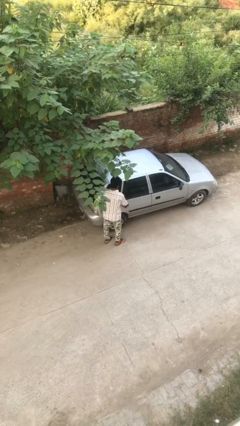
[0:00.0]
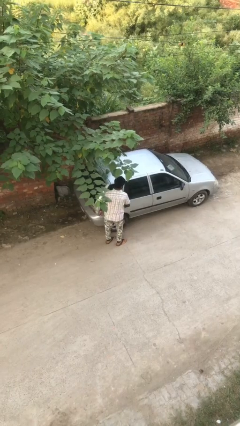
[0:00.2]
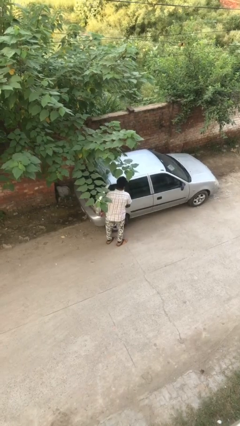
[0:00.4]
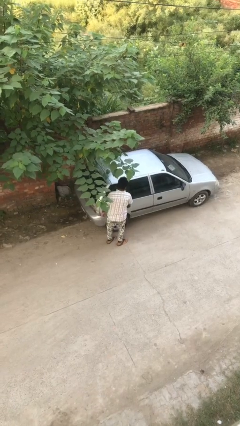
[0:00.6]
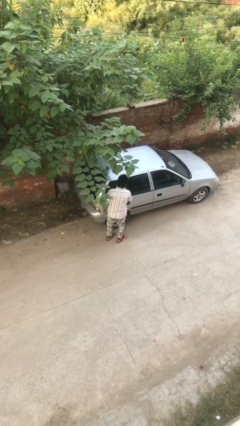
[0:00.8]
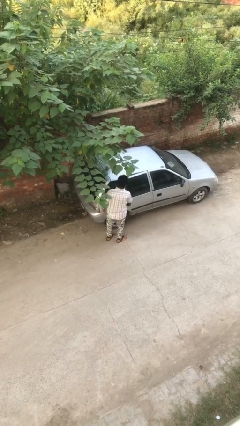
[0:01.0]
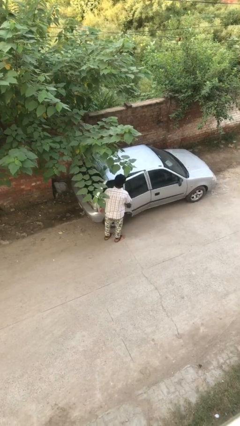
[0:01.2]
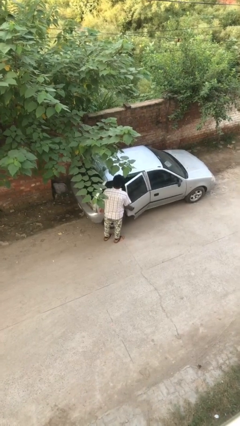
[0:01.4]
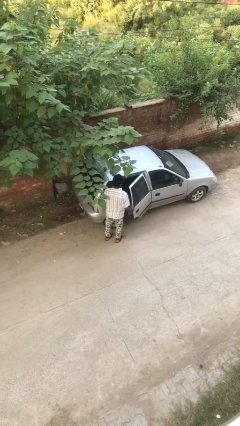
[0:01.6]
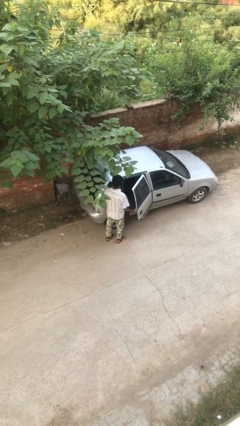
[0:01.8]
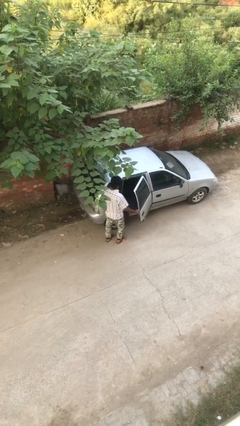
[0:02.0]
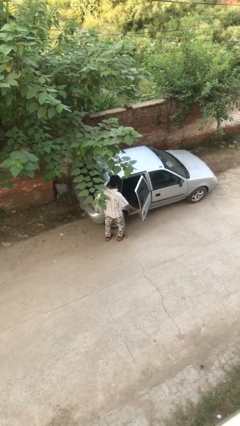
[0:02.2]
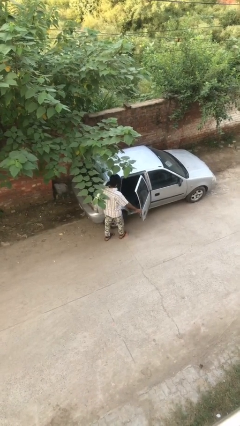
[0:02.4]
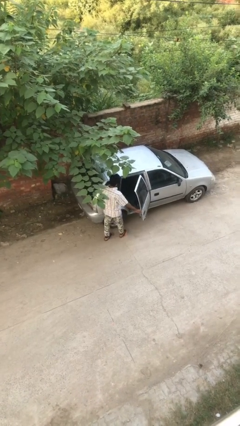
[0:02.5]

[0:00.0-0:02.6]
person opens car door

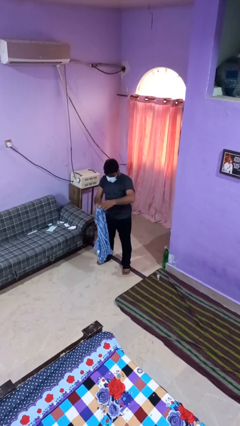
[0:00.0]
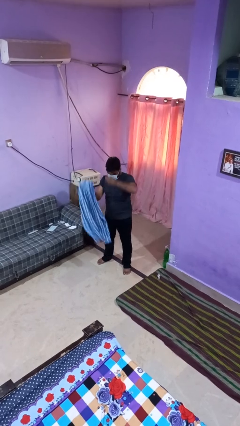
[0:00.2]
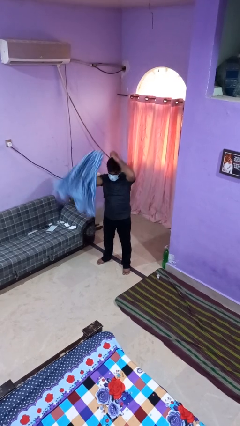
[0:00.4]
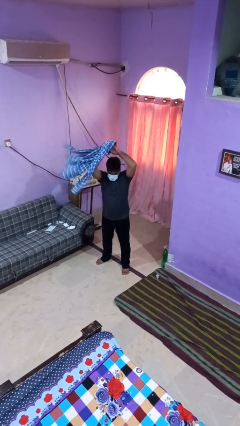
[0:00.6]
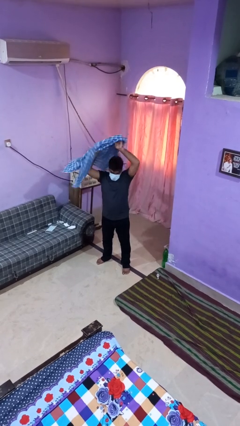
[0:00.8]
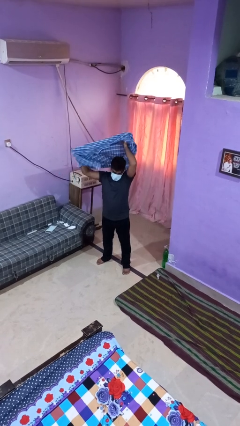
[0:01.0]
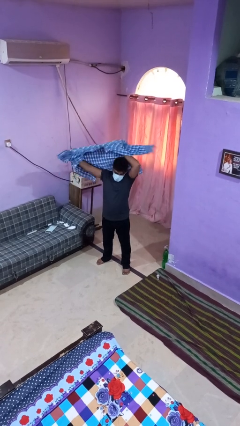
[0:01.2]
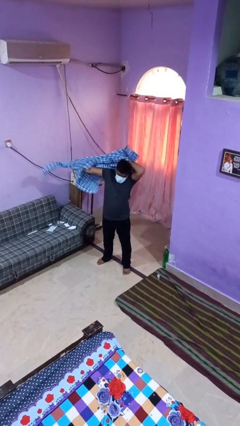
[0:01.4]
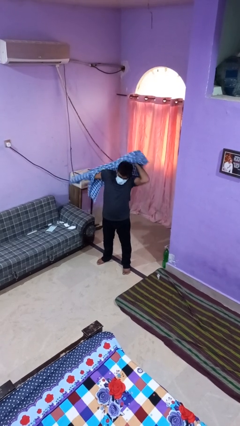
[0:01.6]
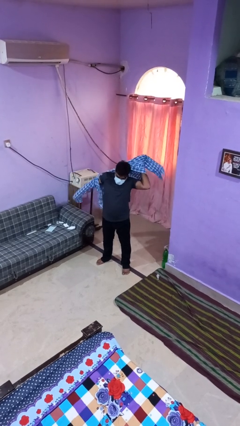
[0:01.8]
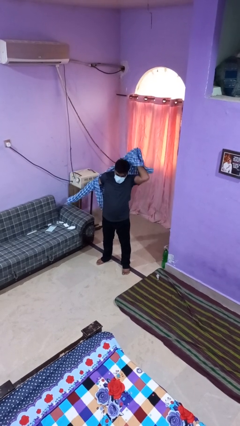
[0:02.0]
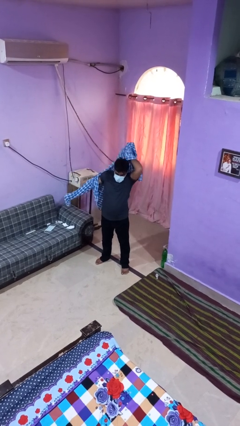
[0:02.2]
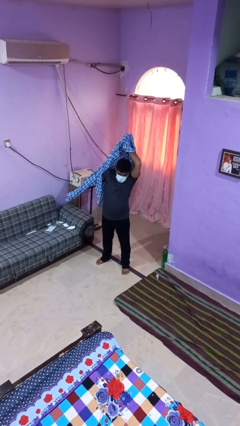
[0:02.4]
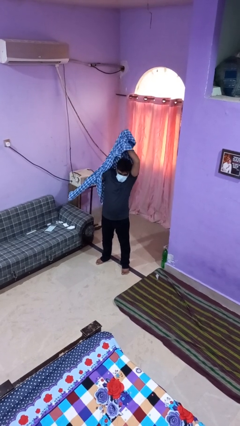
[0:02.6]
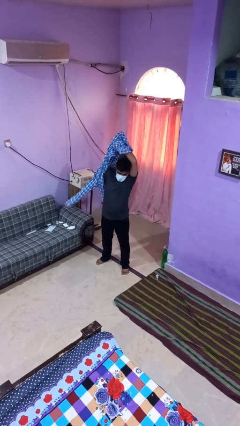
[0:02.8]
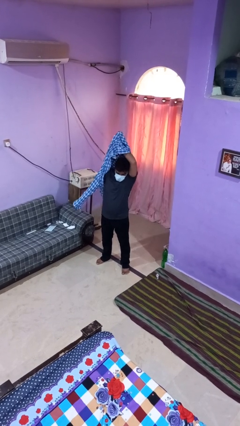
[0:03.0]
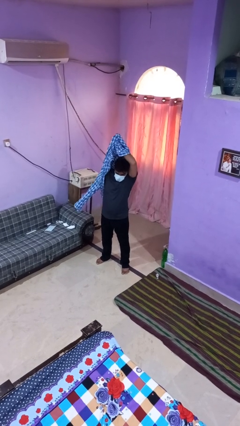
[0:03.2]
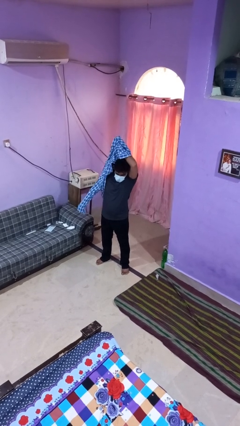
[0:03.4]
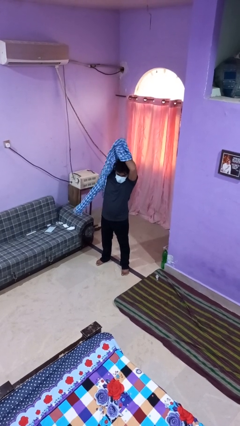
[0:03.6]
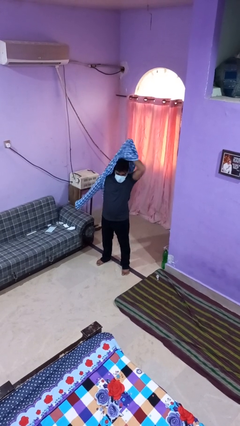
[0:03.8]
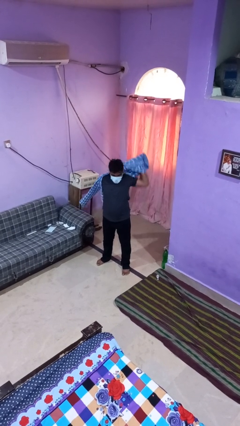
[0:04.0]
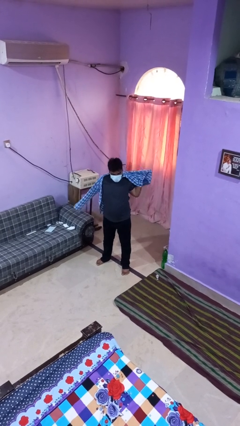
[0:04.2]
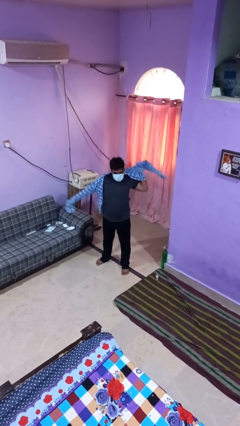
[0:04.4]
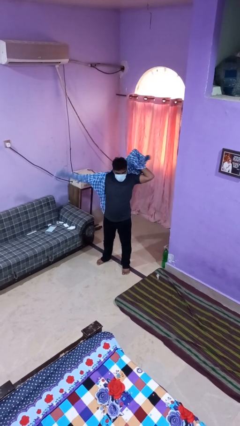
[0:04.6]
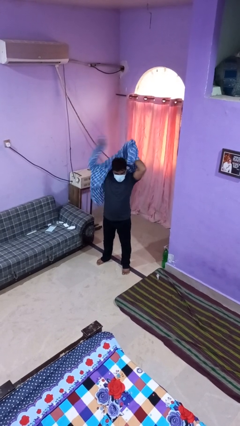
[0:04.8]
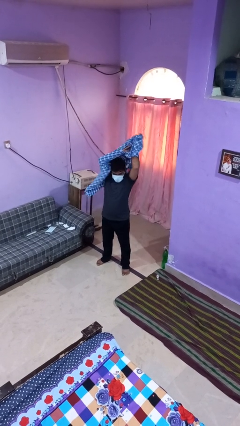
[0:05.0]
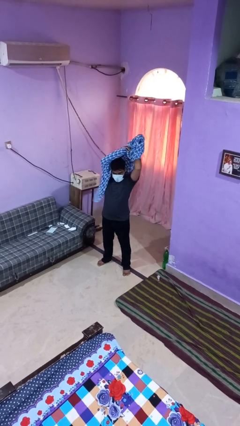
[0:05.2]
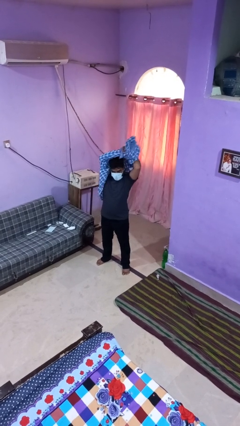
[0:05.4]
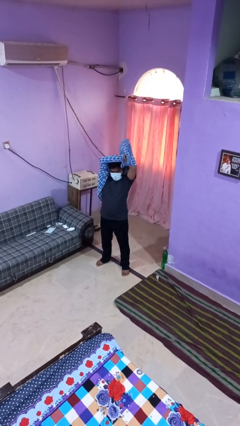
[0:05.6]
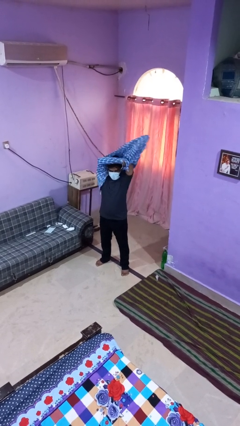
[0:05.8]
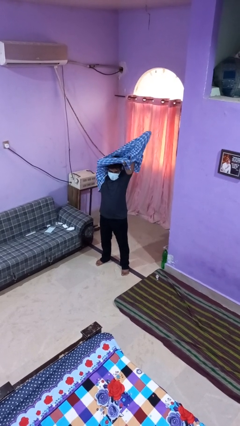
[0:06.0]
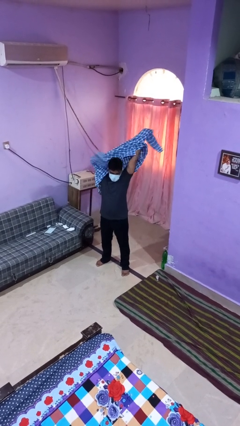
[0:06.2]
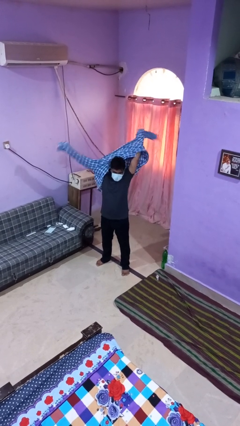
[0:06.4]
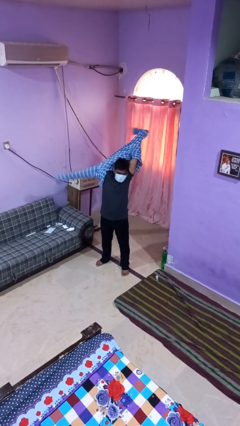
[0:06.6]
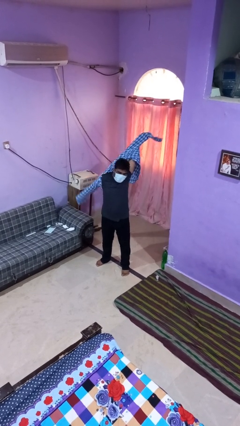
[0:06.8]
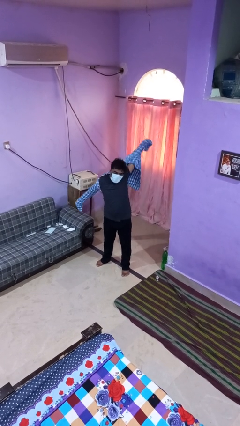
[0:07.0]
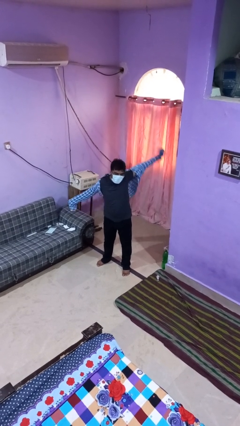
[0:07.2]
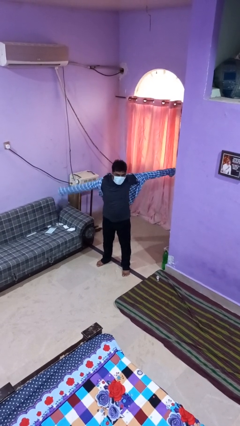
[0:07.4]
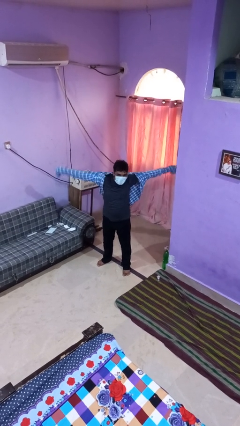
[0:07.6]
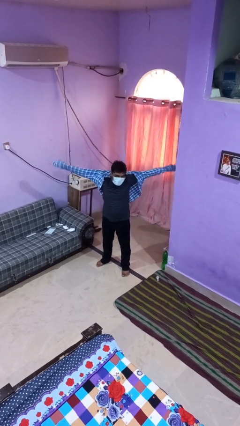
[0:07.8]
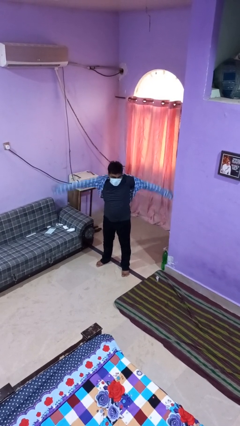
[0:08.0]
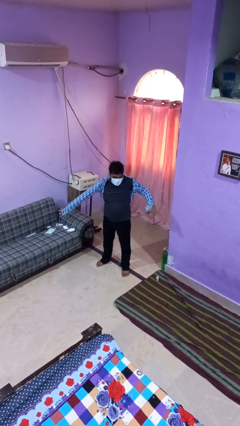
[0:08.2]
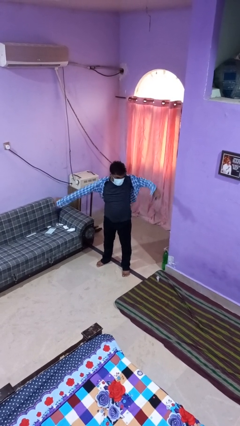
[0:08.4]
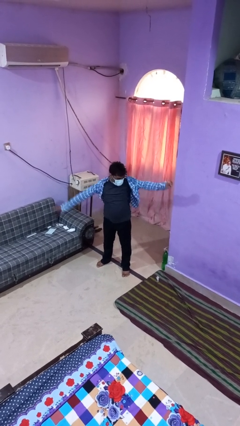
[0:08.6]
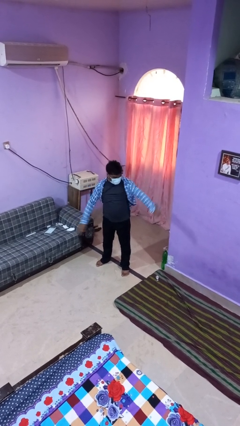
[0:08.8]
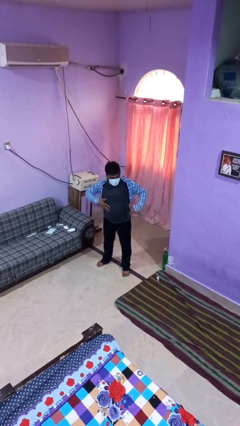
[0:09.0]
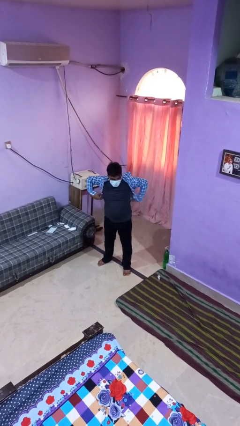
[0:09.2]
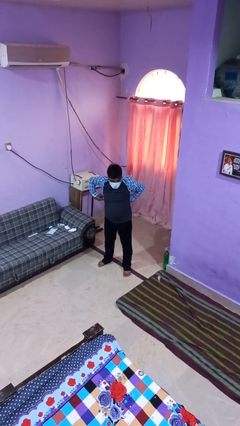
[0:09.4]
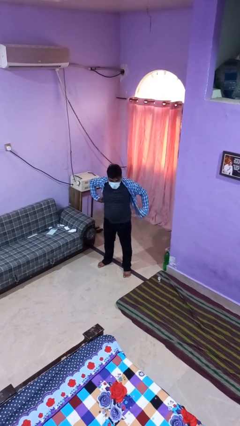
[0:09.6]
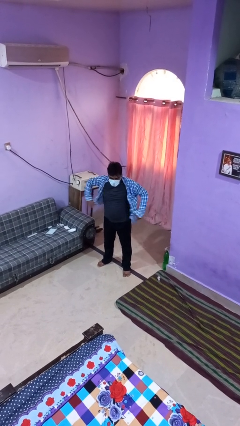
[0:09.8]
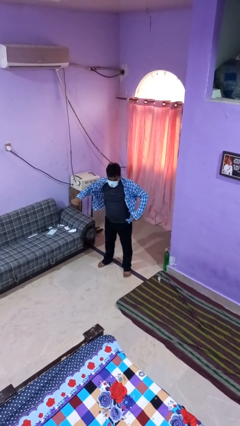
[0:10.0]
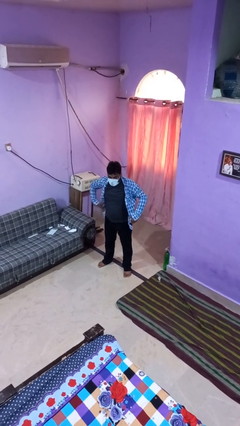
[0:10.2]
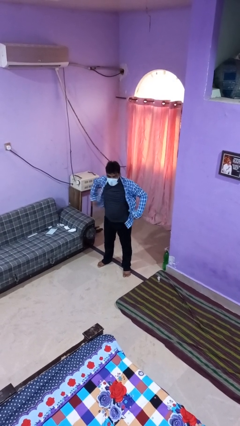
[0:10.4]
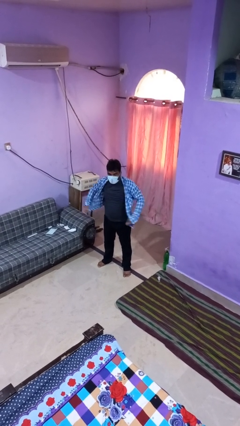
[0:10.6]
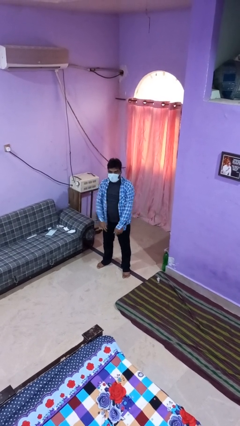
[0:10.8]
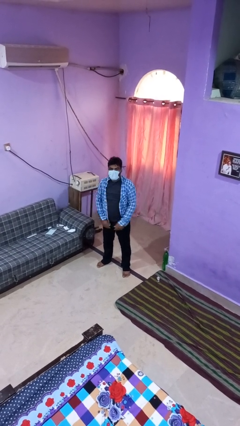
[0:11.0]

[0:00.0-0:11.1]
person puts on shirt

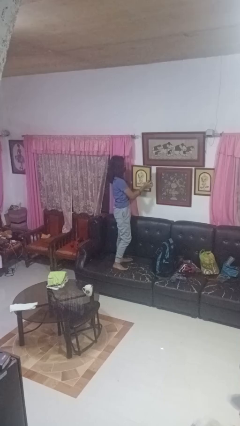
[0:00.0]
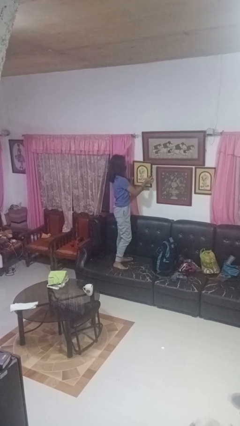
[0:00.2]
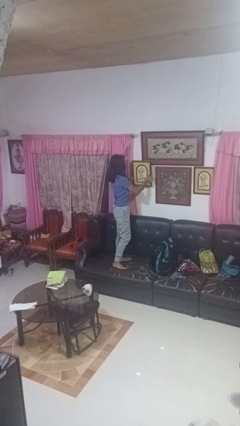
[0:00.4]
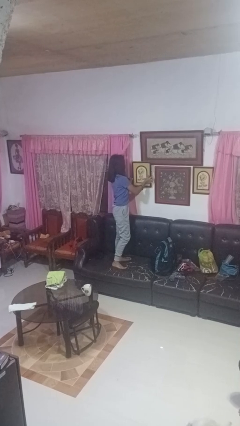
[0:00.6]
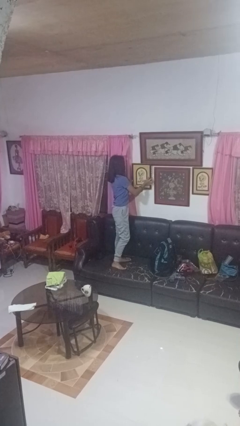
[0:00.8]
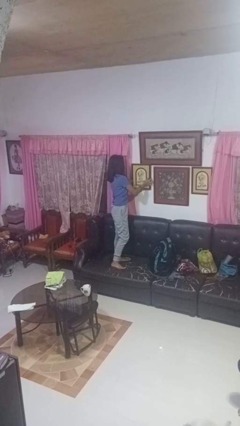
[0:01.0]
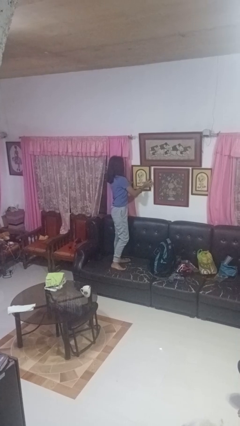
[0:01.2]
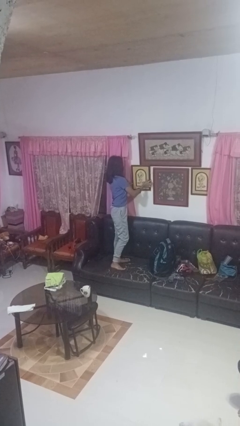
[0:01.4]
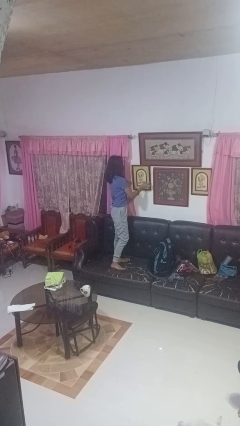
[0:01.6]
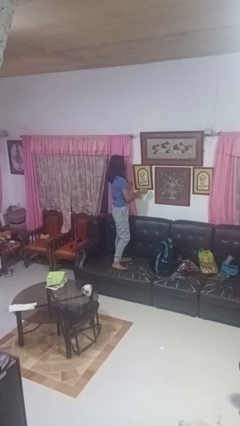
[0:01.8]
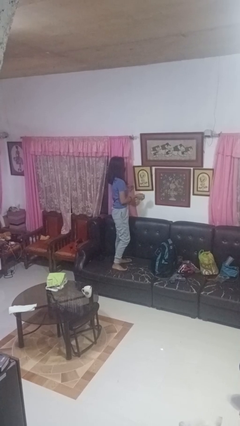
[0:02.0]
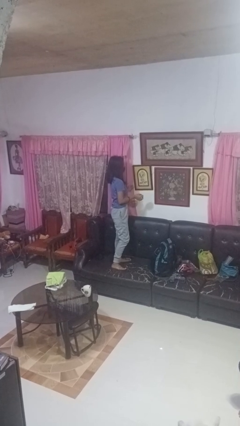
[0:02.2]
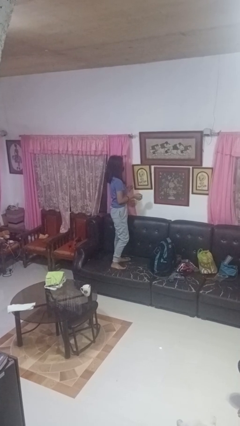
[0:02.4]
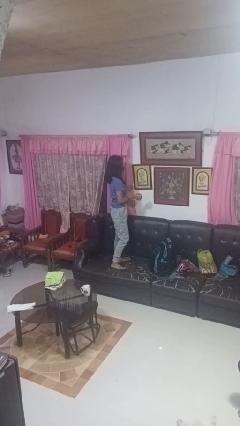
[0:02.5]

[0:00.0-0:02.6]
person puts up picture frame

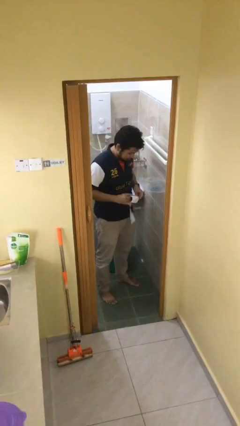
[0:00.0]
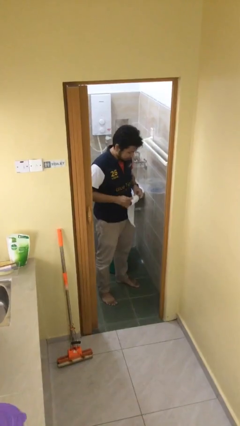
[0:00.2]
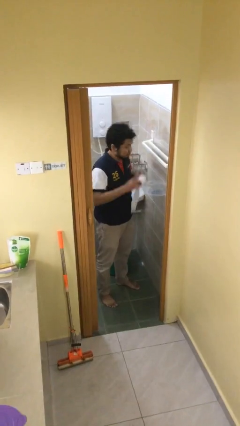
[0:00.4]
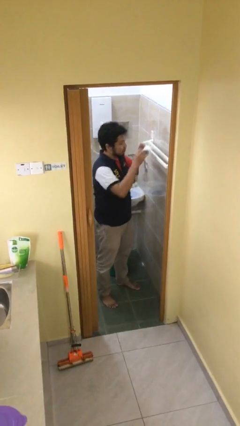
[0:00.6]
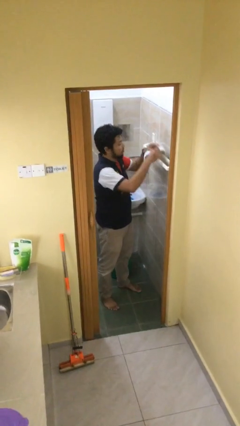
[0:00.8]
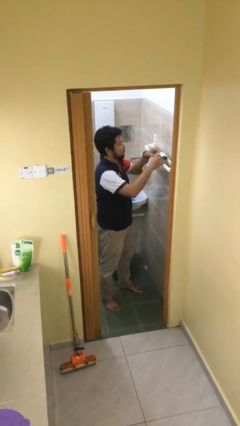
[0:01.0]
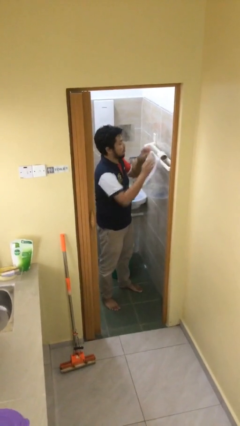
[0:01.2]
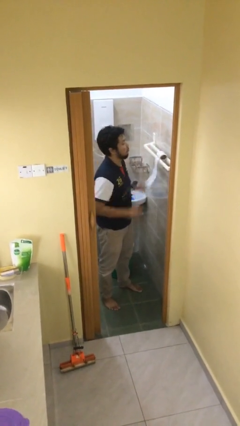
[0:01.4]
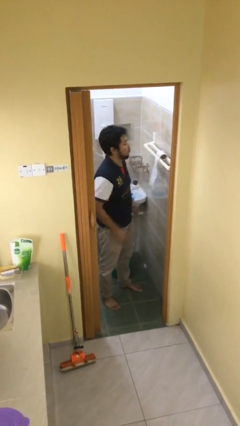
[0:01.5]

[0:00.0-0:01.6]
person puts down object on countertop
